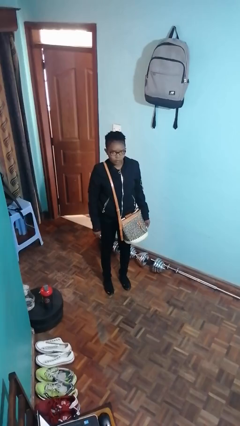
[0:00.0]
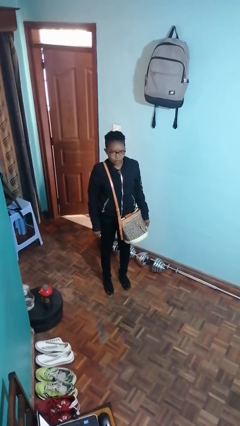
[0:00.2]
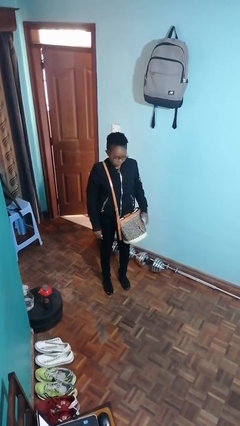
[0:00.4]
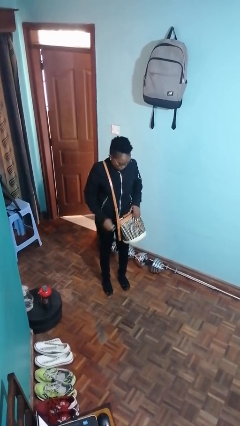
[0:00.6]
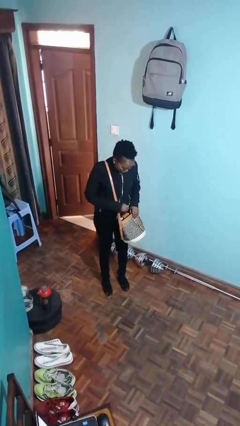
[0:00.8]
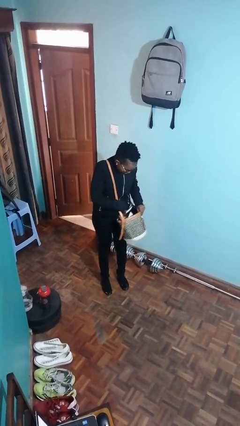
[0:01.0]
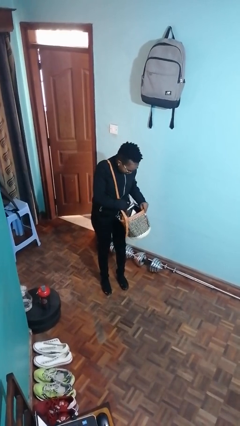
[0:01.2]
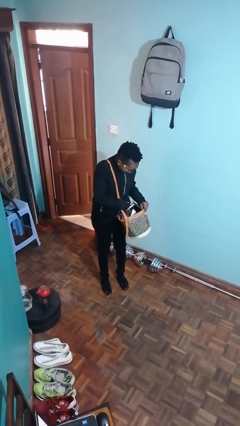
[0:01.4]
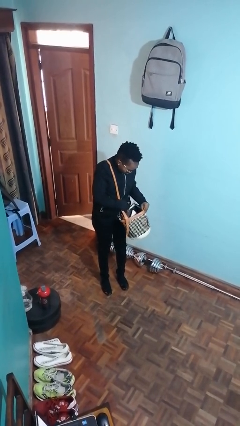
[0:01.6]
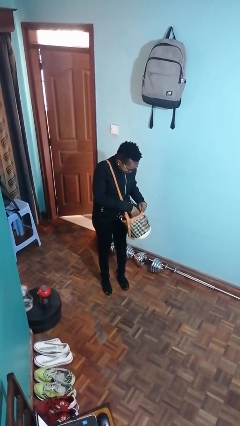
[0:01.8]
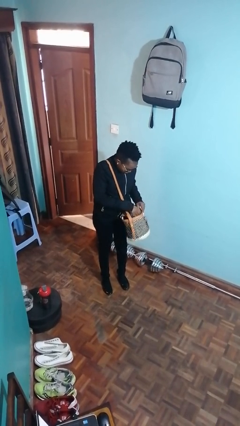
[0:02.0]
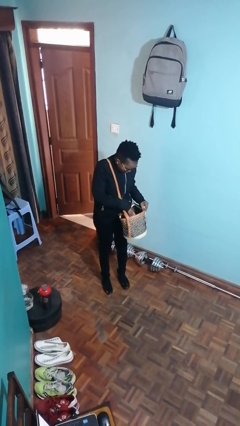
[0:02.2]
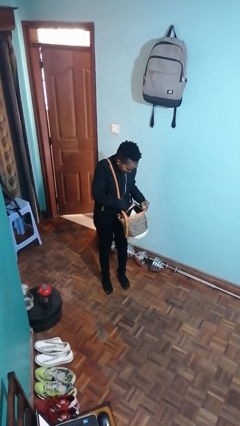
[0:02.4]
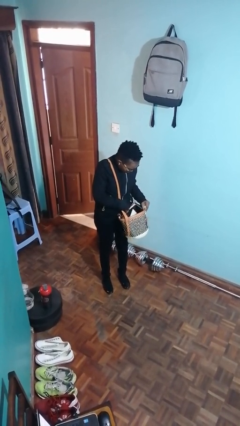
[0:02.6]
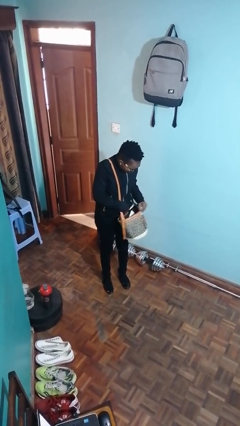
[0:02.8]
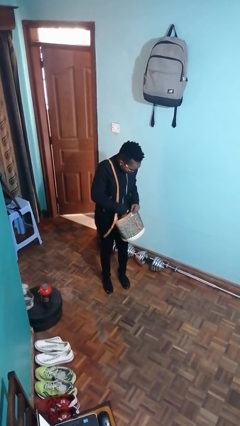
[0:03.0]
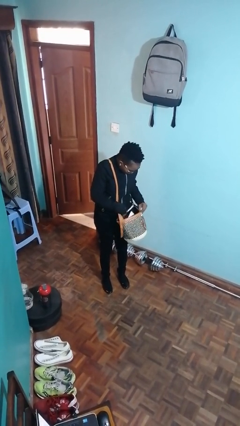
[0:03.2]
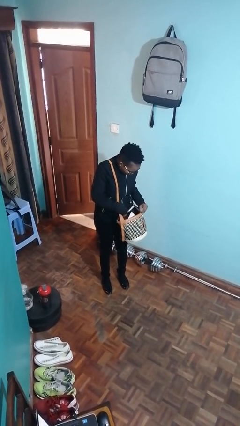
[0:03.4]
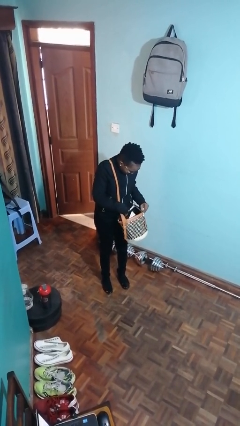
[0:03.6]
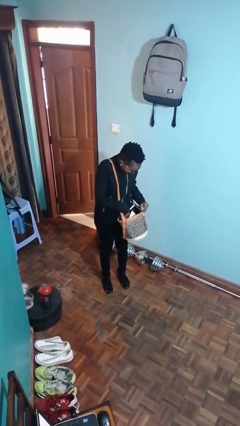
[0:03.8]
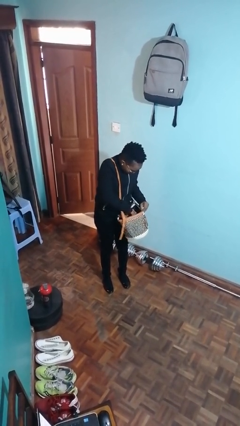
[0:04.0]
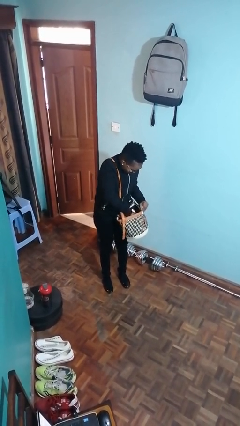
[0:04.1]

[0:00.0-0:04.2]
person searches in purse

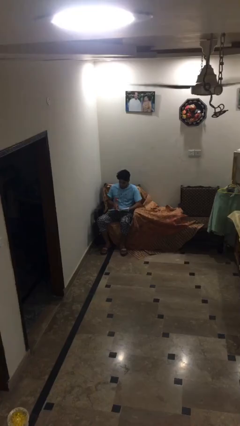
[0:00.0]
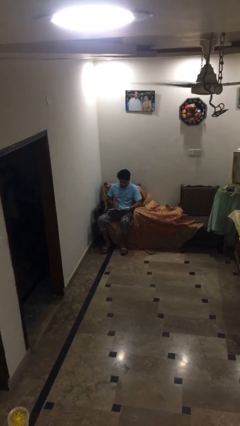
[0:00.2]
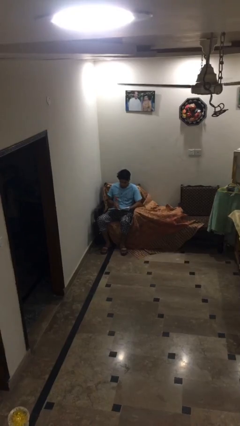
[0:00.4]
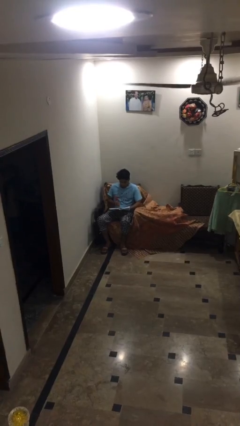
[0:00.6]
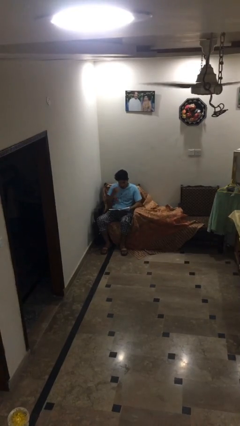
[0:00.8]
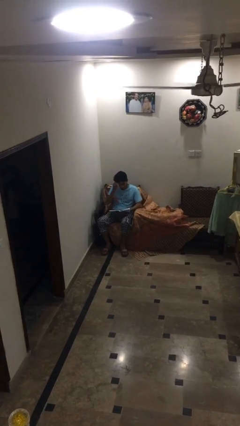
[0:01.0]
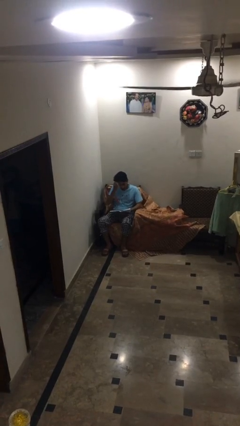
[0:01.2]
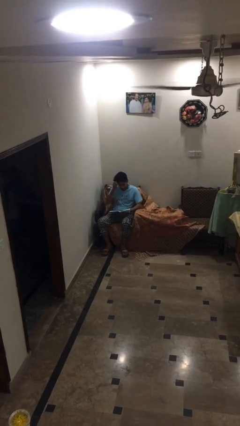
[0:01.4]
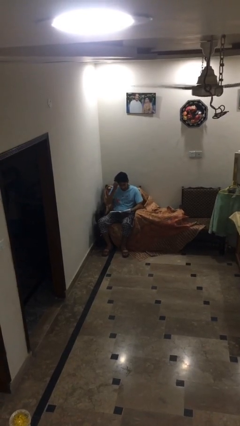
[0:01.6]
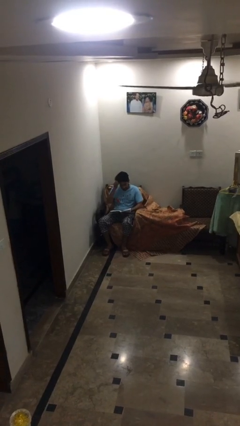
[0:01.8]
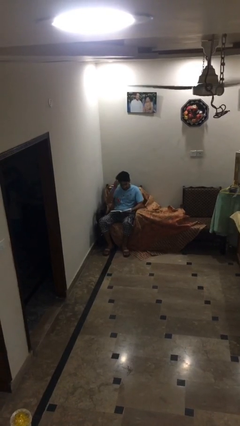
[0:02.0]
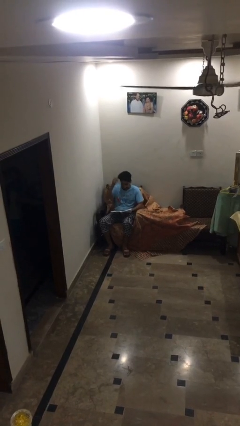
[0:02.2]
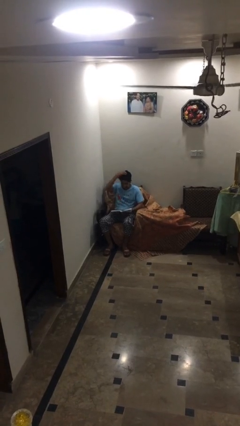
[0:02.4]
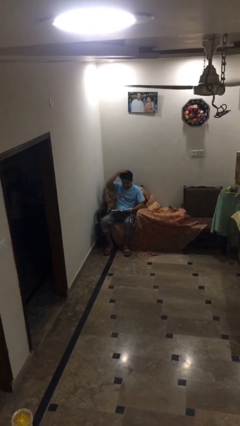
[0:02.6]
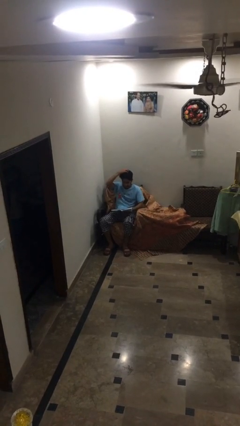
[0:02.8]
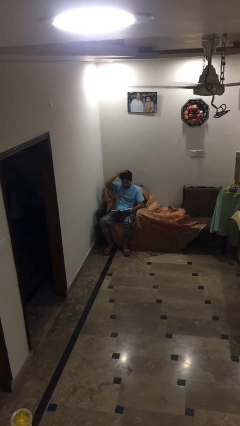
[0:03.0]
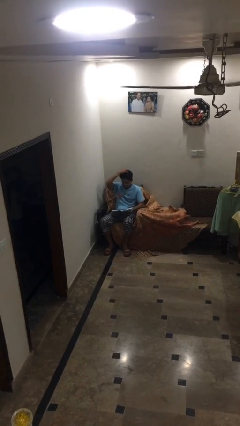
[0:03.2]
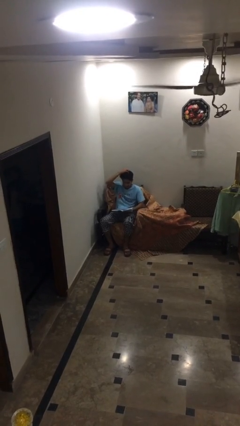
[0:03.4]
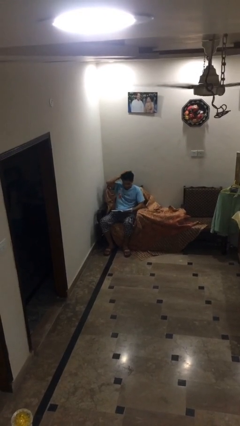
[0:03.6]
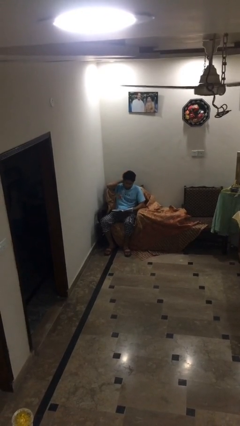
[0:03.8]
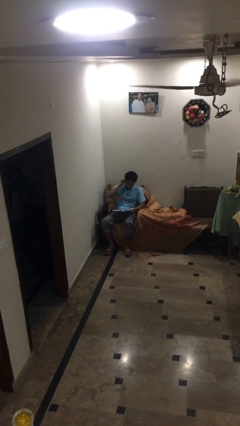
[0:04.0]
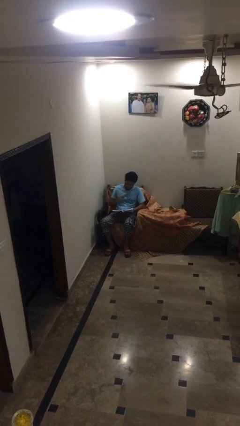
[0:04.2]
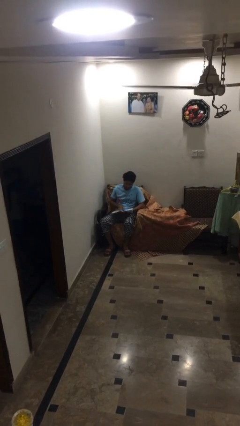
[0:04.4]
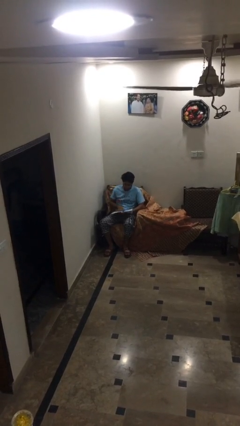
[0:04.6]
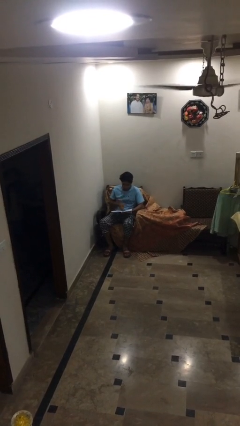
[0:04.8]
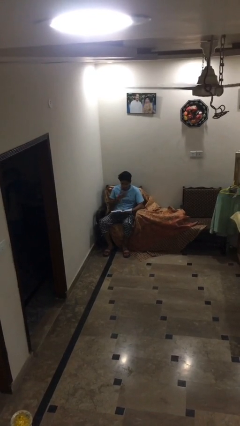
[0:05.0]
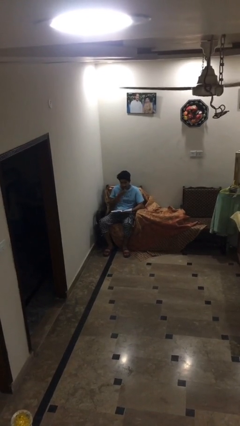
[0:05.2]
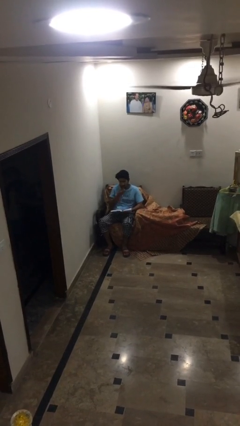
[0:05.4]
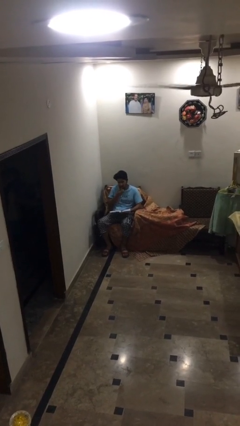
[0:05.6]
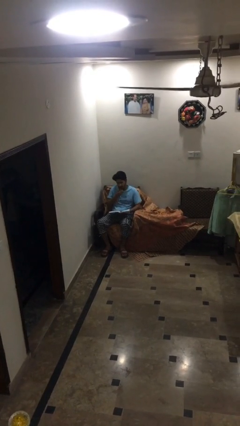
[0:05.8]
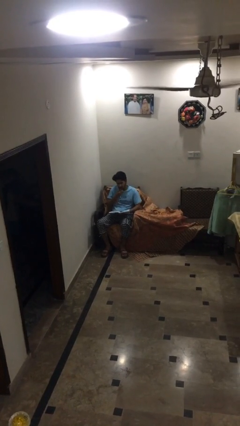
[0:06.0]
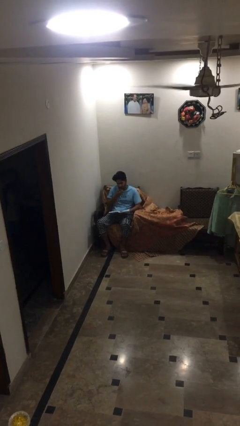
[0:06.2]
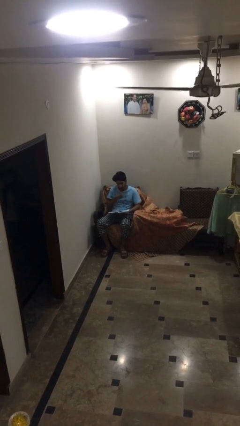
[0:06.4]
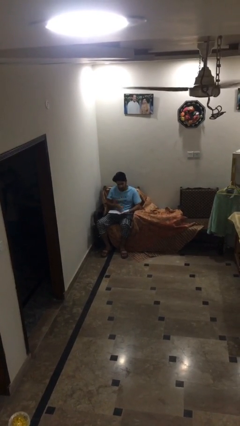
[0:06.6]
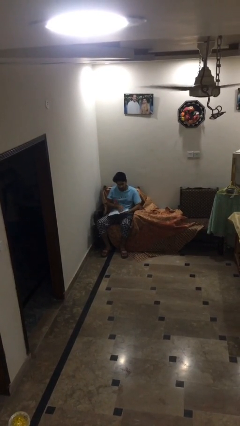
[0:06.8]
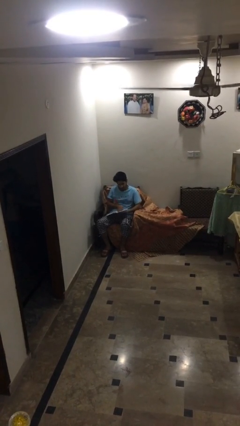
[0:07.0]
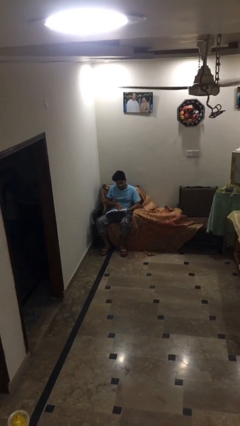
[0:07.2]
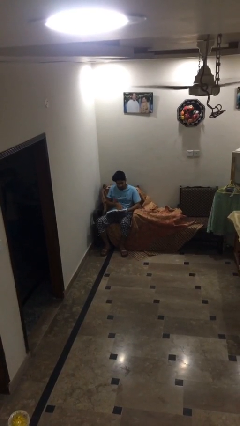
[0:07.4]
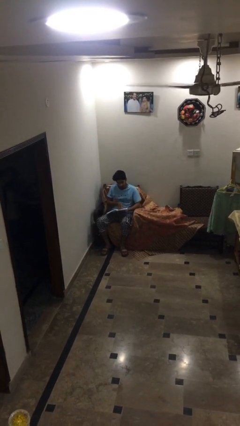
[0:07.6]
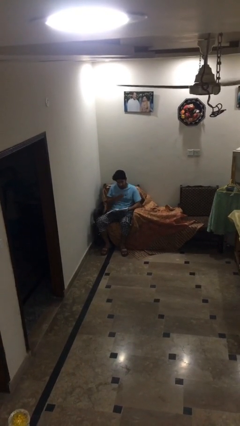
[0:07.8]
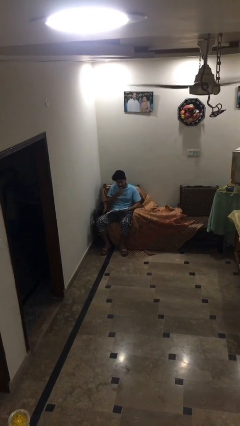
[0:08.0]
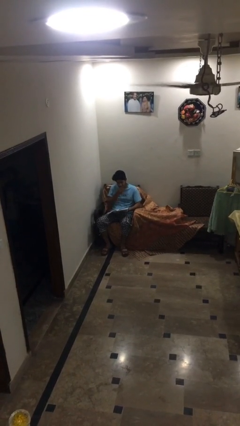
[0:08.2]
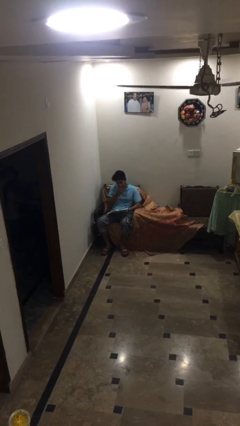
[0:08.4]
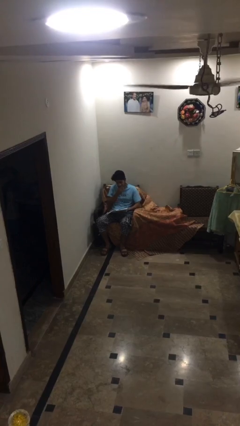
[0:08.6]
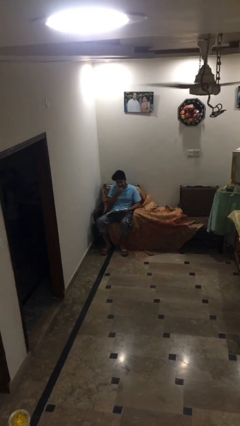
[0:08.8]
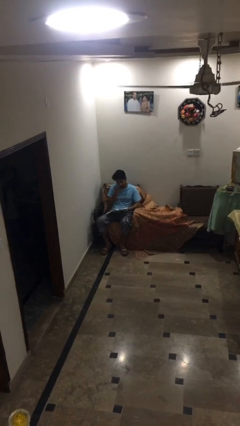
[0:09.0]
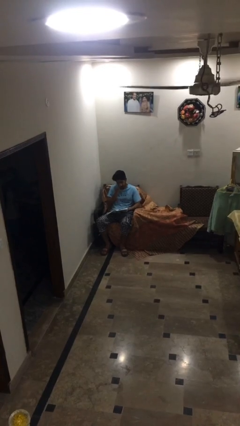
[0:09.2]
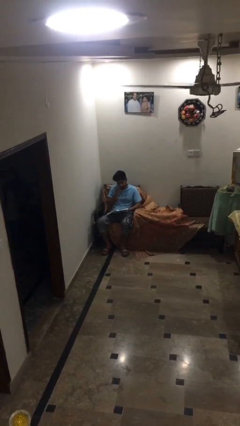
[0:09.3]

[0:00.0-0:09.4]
person reads document

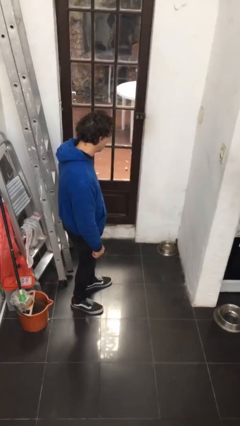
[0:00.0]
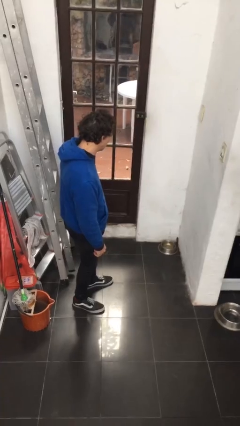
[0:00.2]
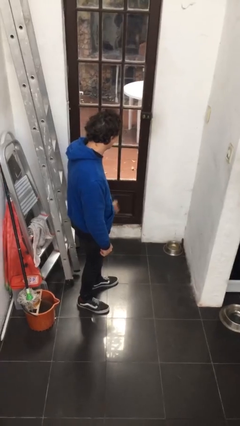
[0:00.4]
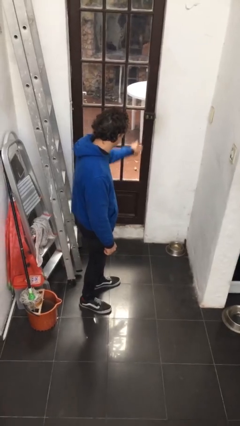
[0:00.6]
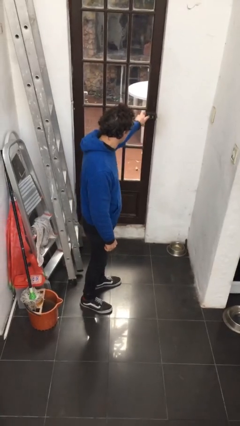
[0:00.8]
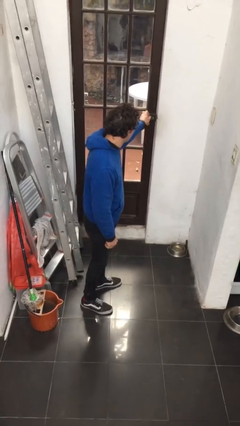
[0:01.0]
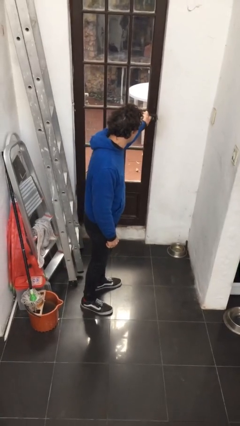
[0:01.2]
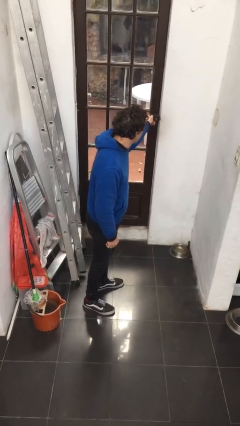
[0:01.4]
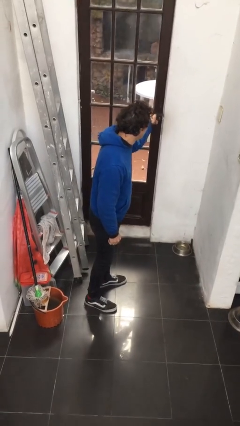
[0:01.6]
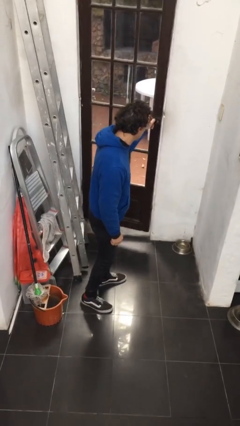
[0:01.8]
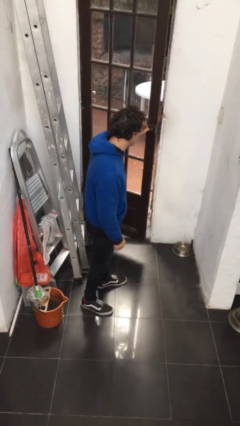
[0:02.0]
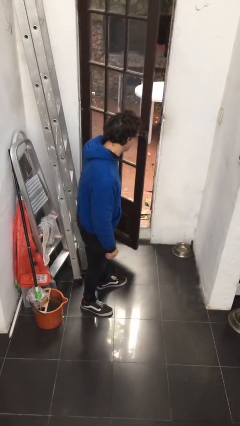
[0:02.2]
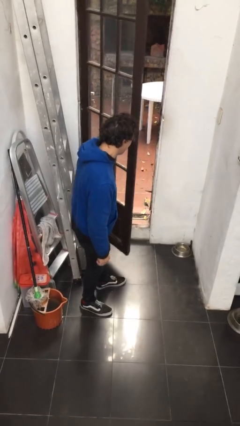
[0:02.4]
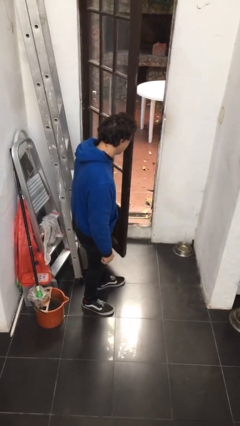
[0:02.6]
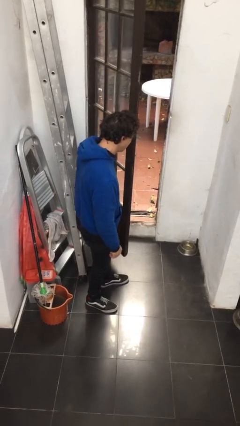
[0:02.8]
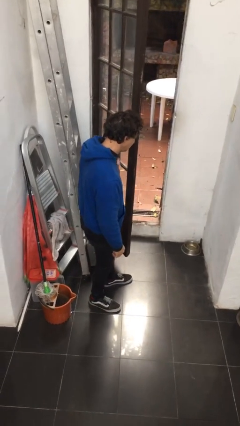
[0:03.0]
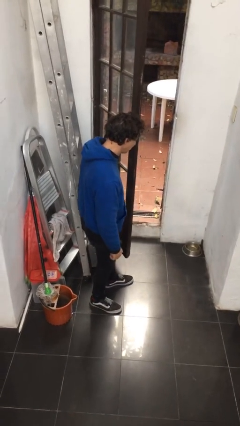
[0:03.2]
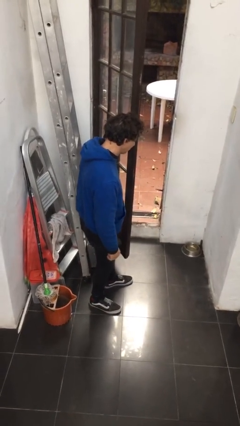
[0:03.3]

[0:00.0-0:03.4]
person opens facility door

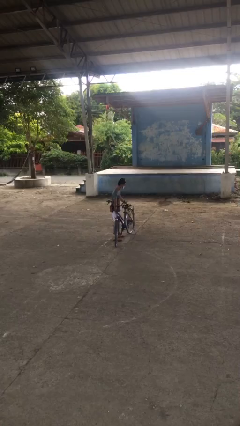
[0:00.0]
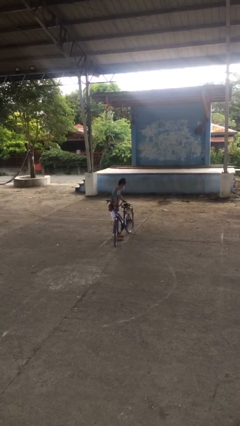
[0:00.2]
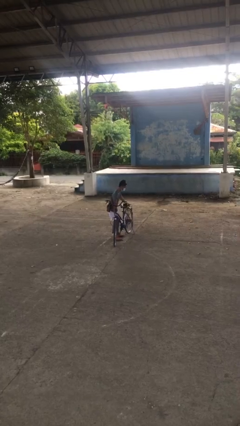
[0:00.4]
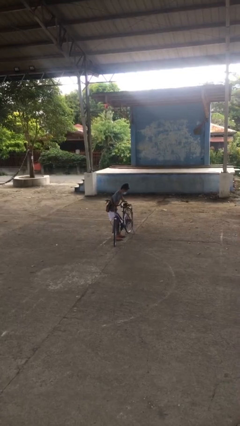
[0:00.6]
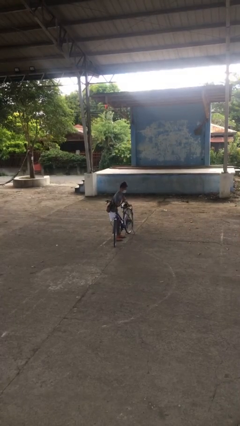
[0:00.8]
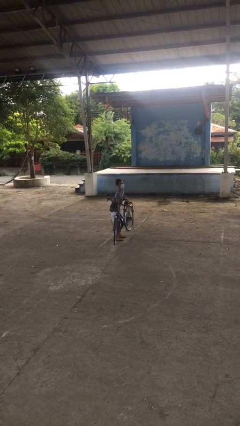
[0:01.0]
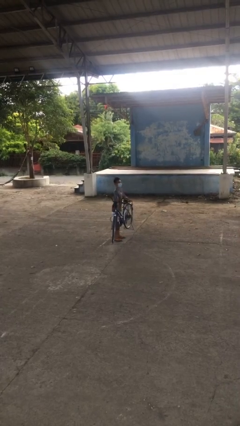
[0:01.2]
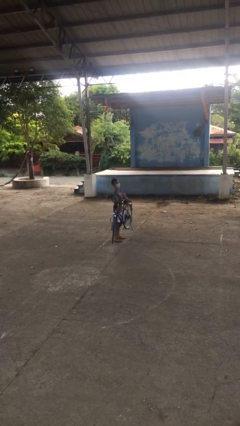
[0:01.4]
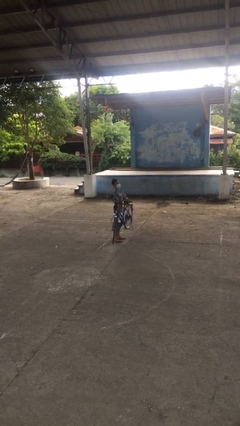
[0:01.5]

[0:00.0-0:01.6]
person picks up object from floor
